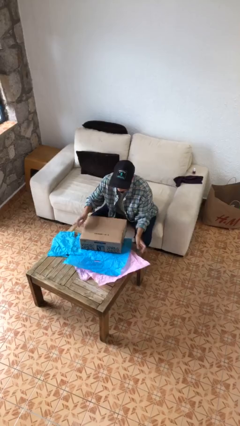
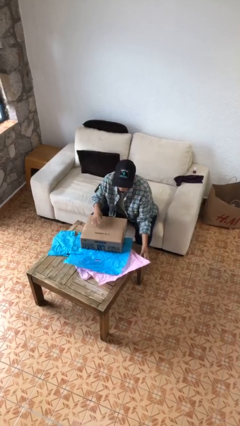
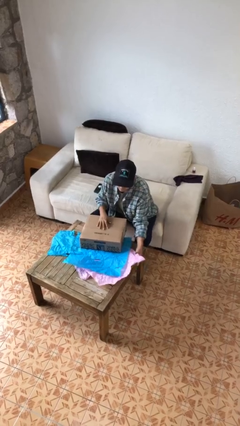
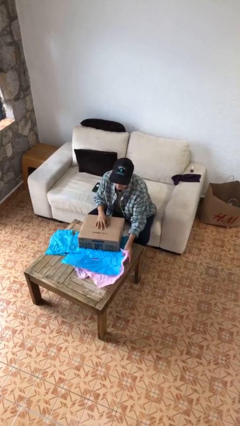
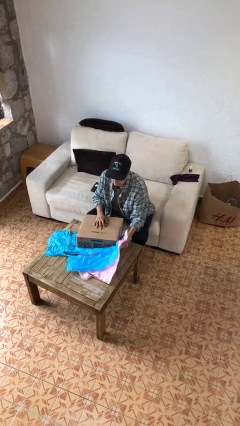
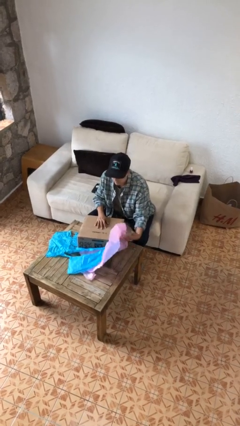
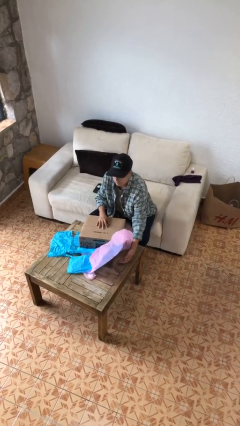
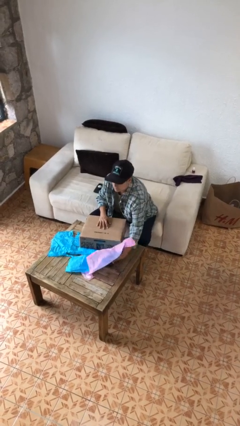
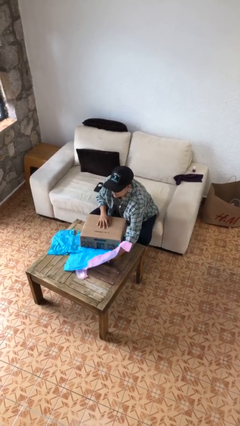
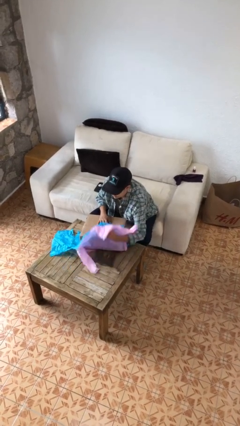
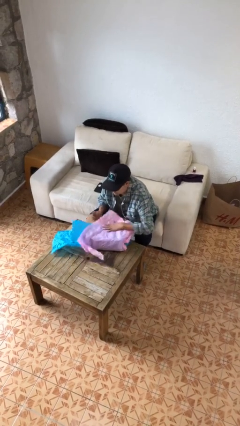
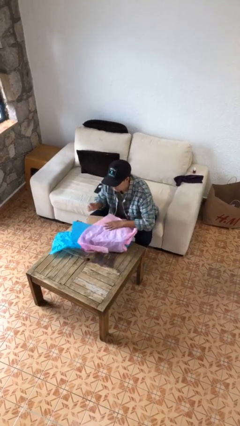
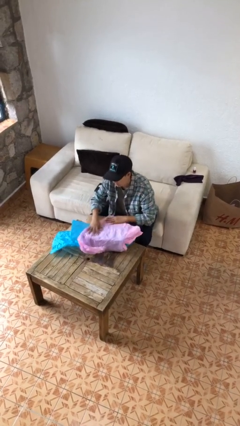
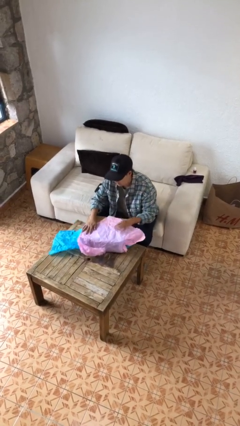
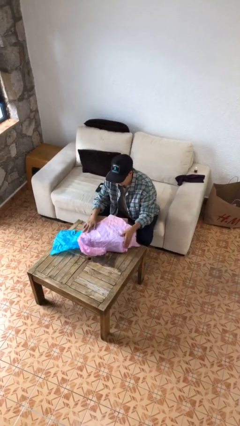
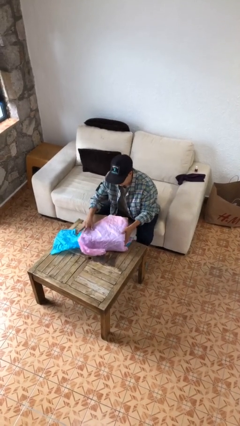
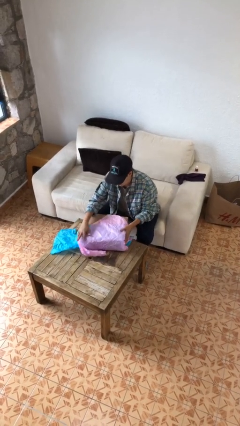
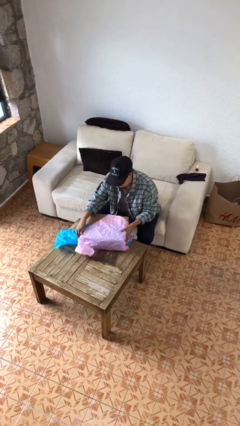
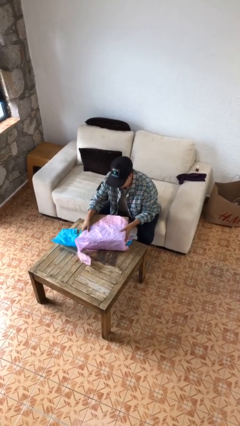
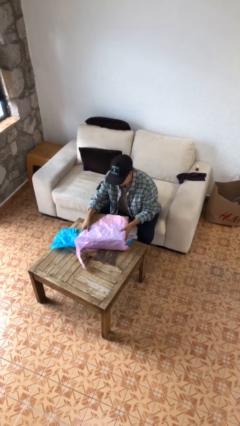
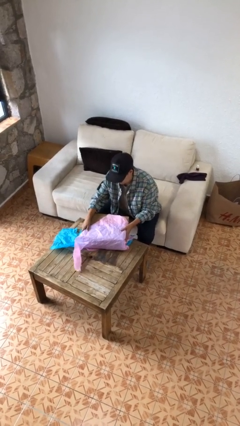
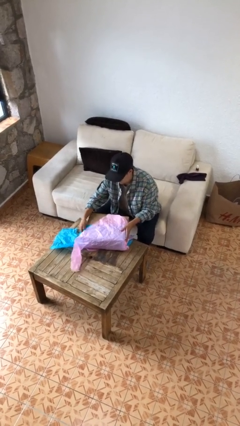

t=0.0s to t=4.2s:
person wraps box

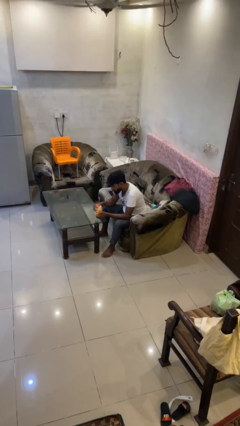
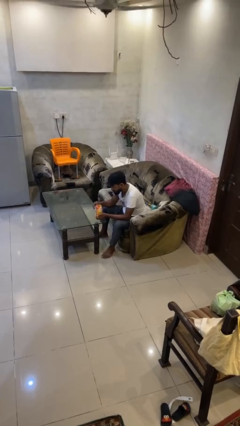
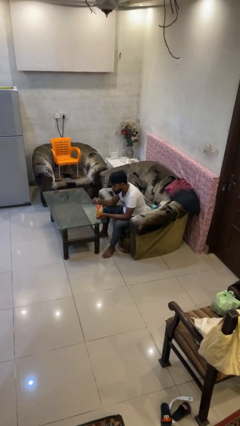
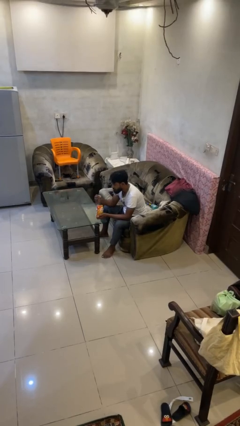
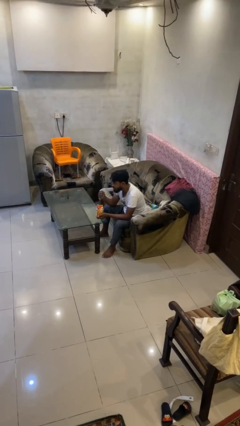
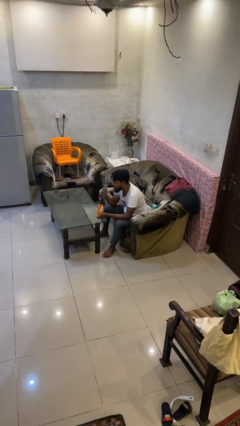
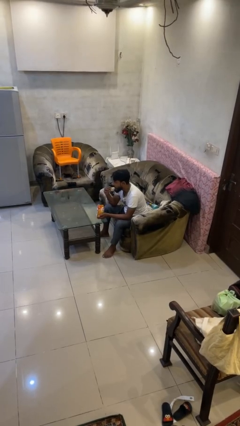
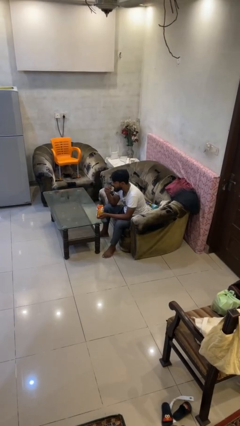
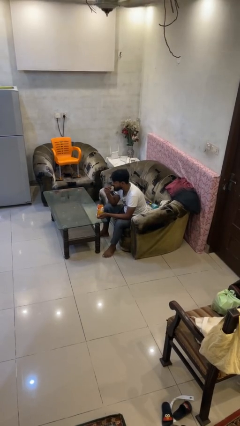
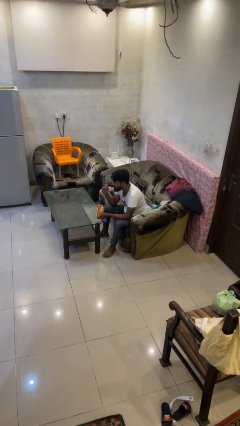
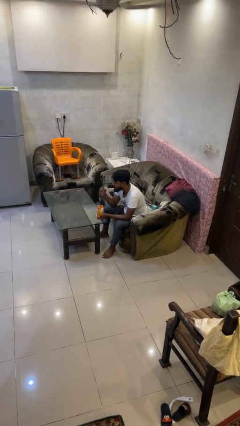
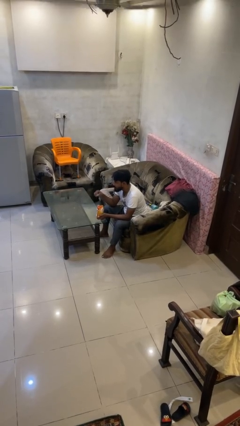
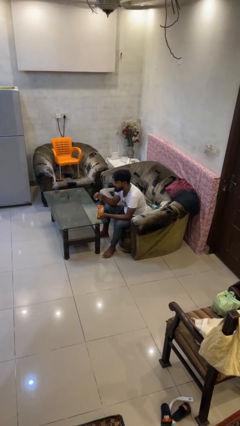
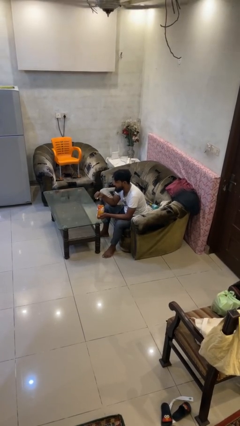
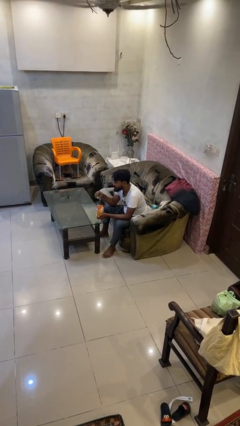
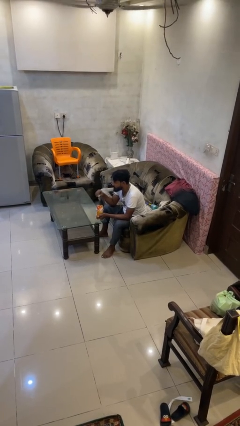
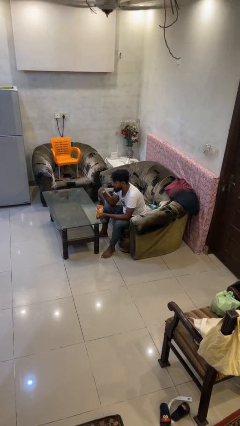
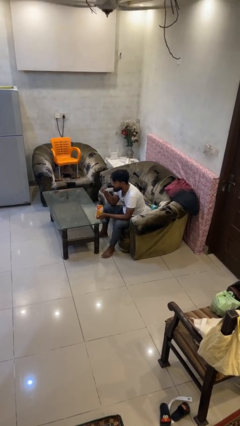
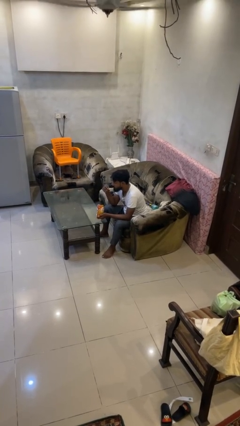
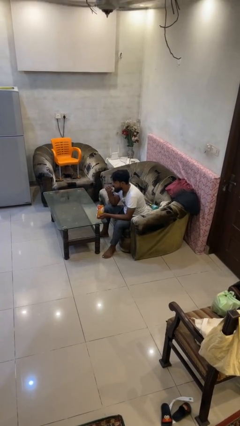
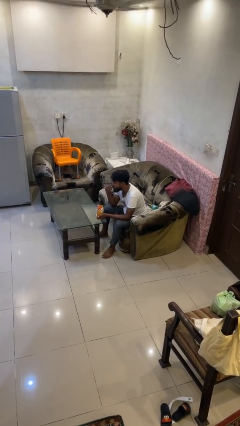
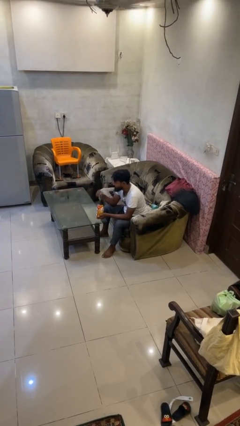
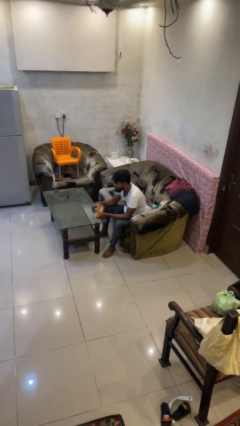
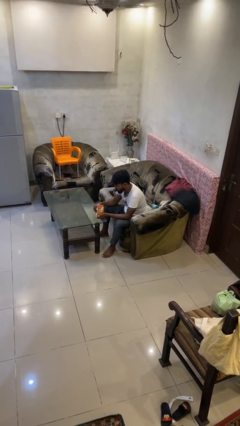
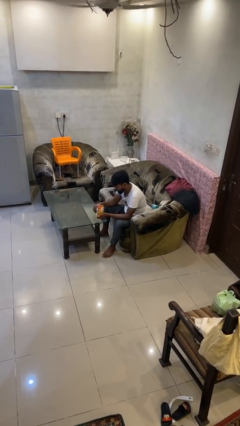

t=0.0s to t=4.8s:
person eats snack from bag

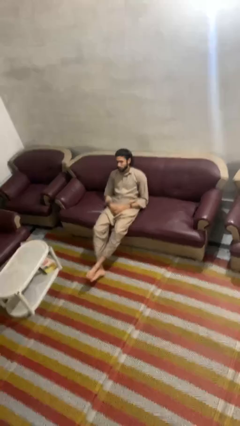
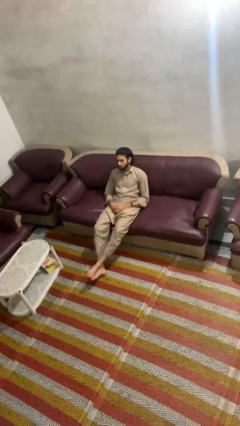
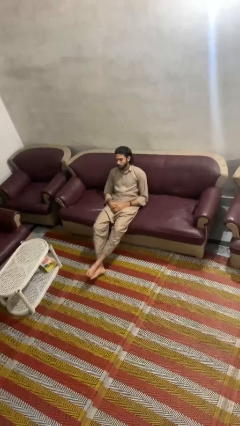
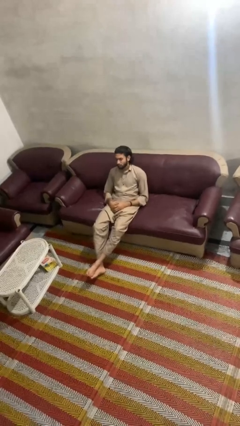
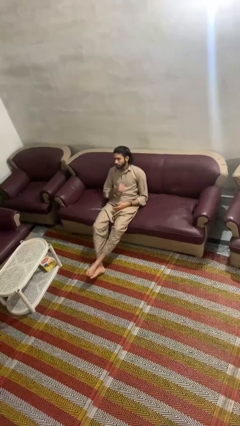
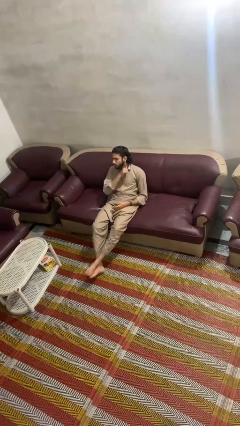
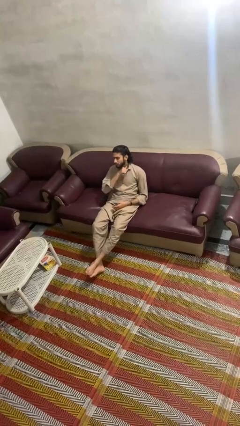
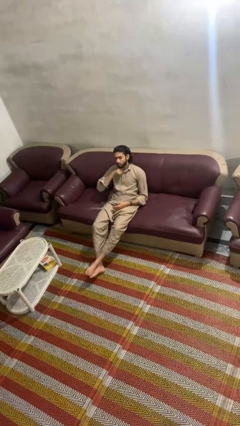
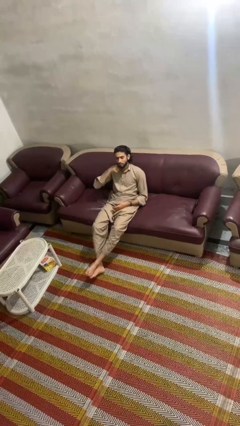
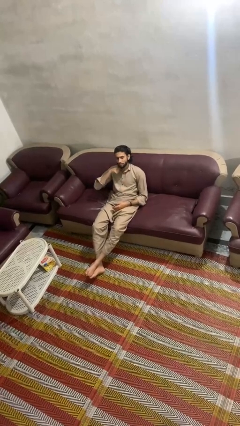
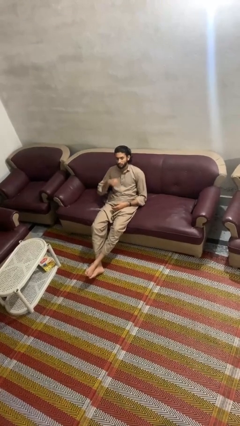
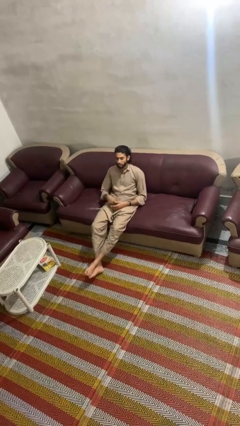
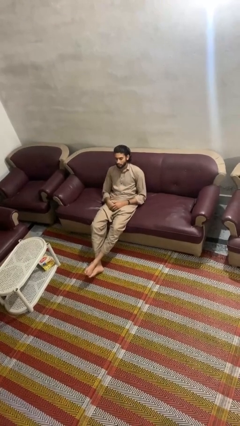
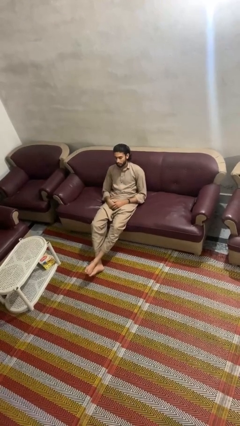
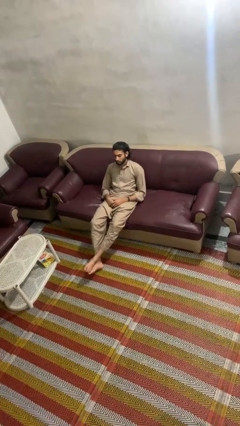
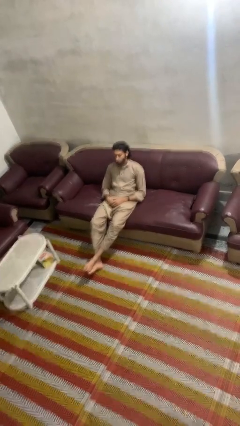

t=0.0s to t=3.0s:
person gestures cut

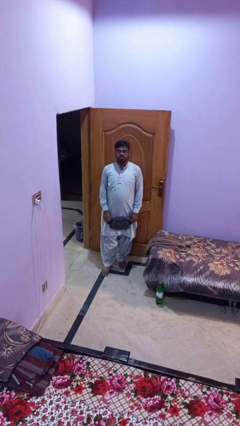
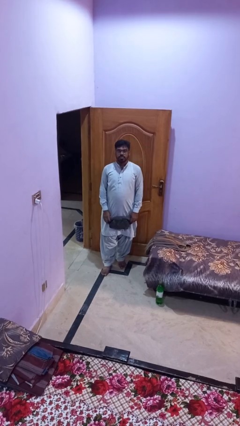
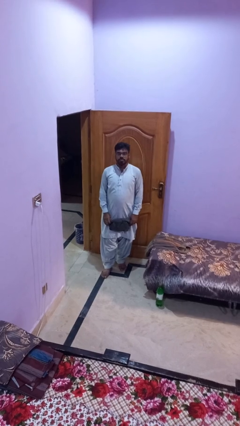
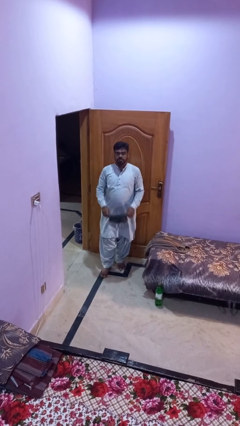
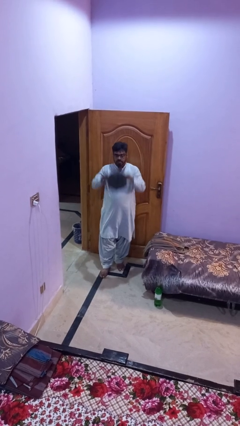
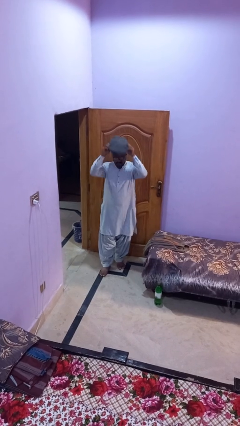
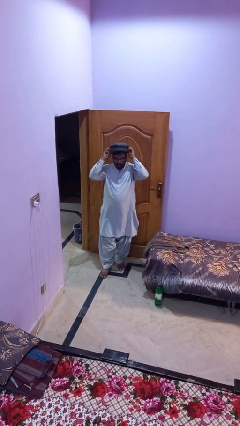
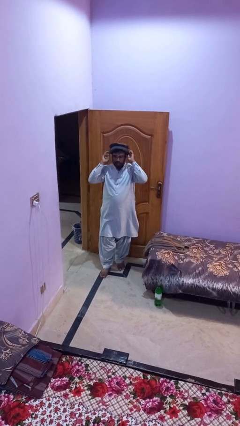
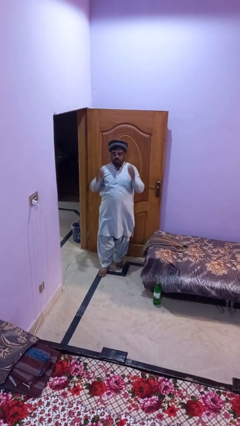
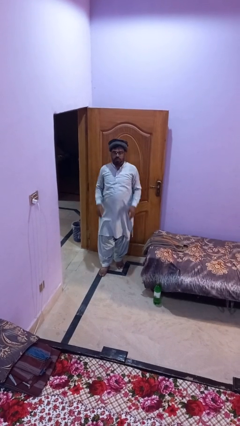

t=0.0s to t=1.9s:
person puts on hat

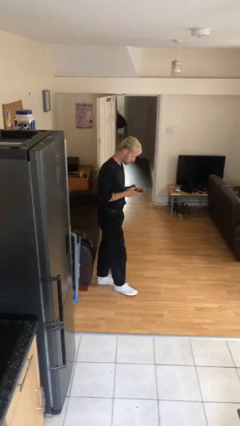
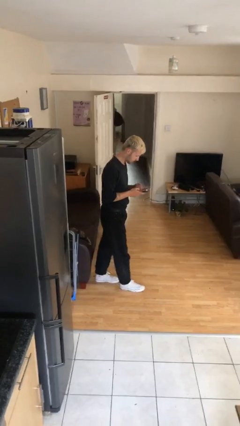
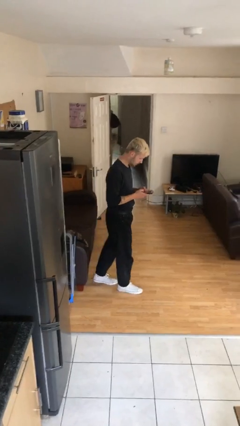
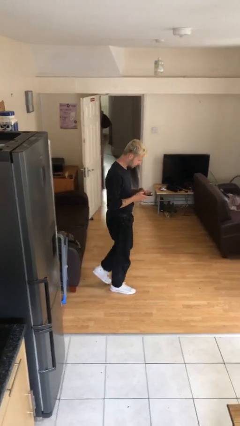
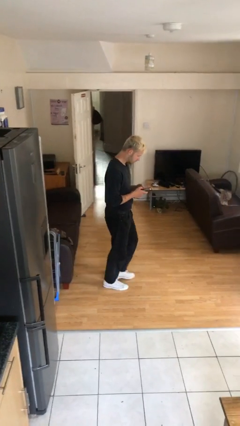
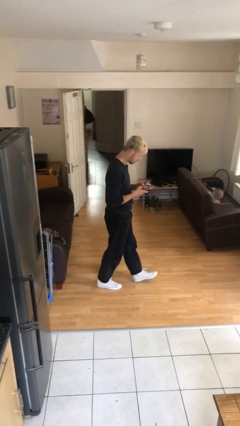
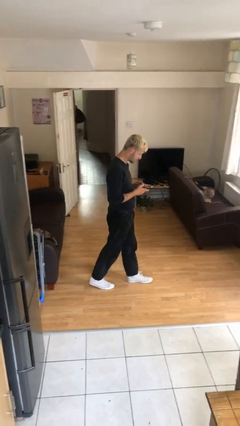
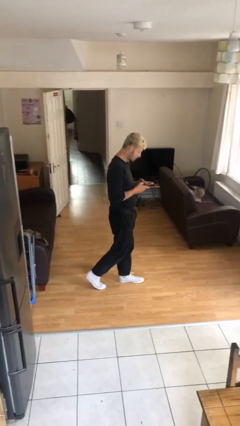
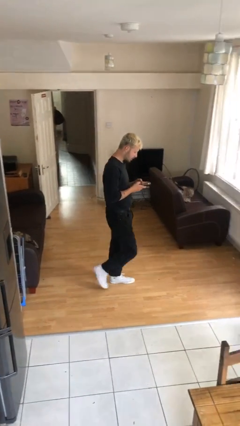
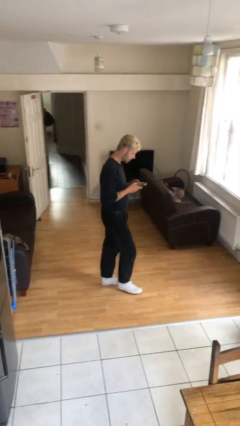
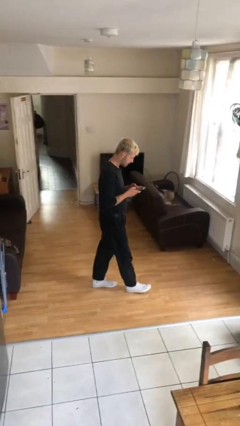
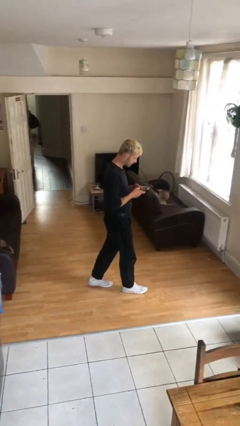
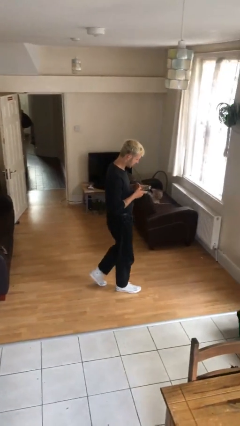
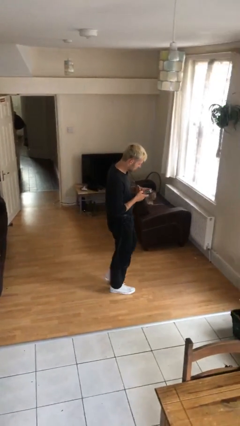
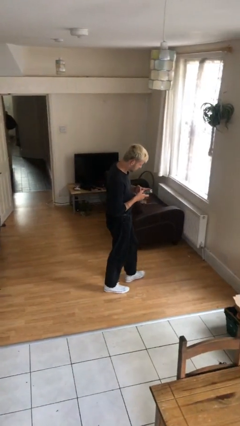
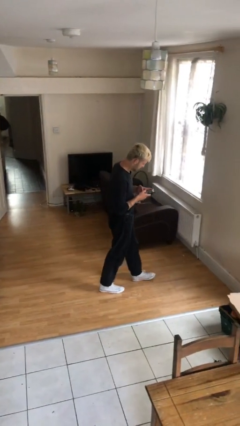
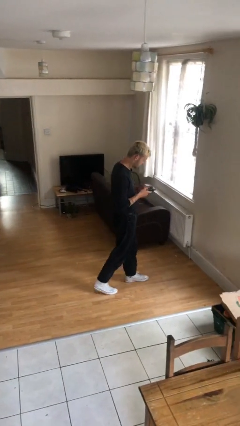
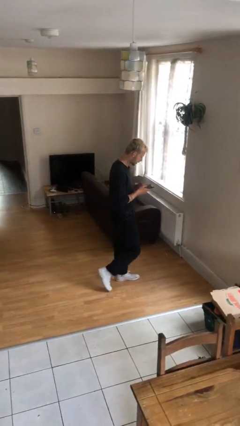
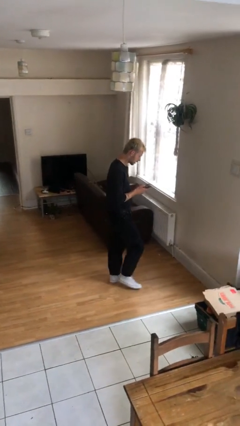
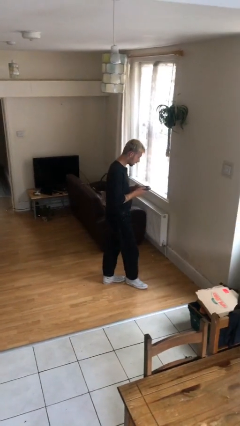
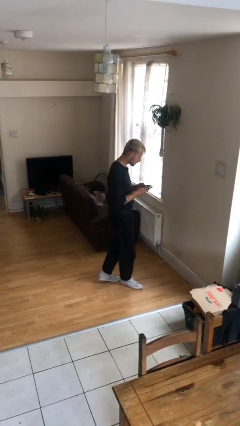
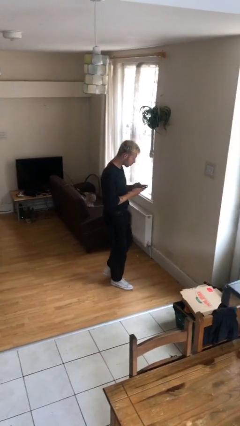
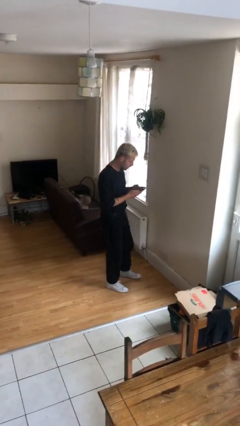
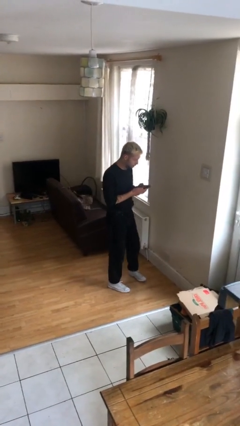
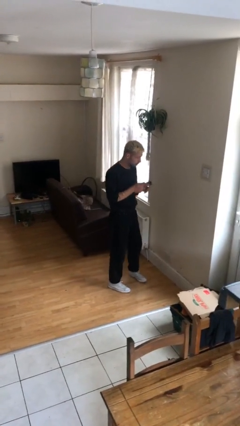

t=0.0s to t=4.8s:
person texts on phone
